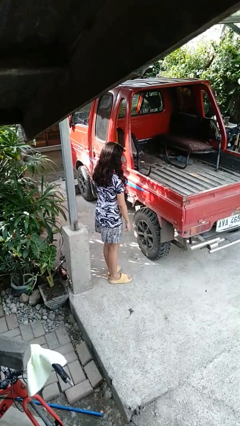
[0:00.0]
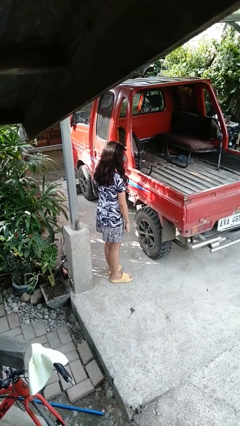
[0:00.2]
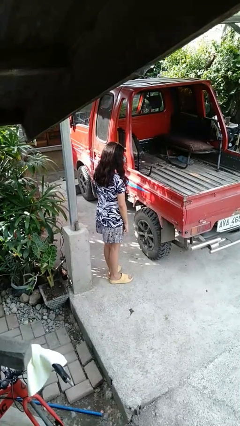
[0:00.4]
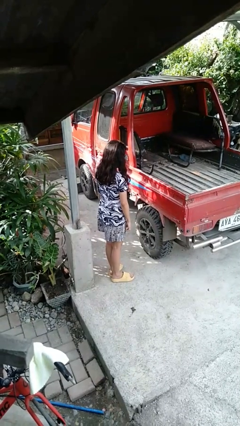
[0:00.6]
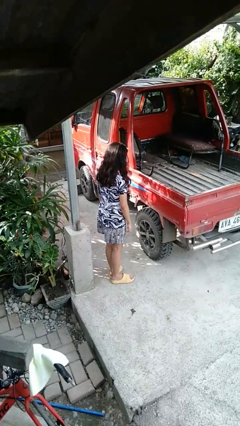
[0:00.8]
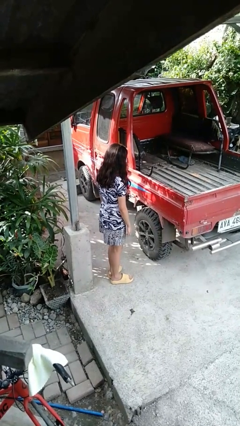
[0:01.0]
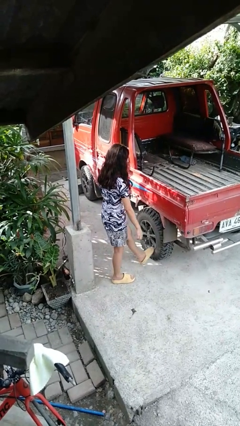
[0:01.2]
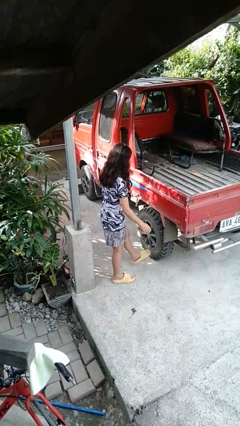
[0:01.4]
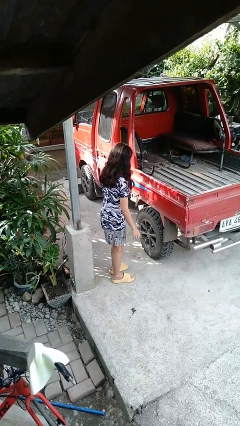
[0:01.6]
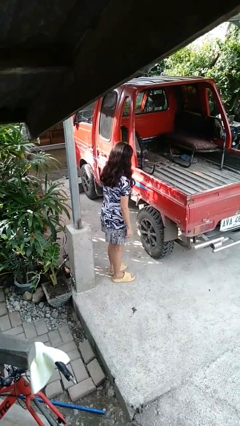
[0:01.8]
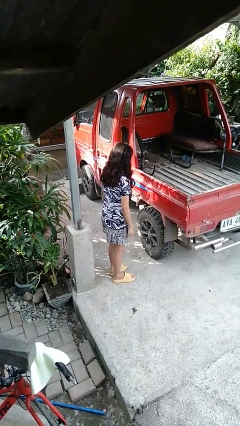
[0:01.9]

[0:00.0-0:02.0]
person kicks car tires

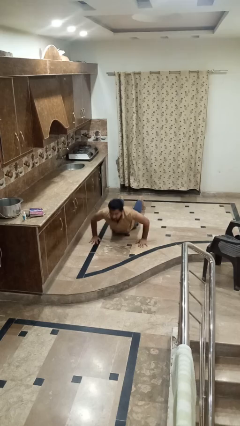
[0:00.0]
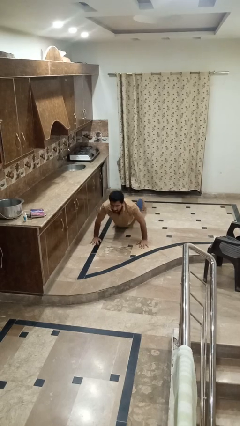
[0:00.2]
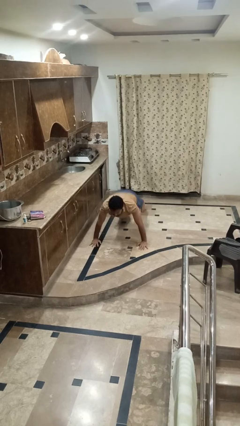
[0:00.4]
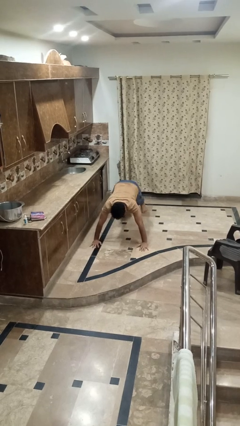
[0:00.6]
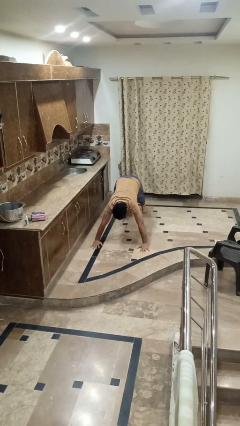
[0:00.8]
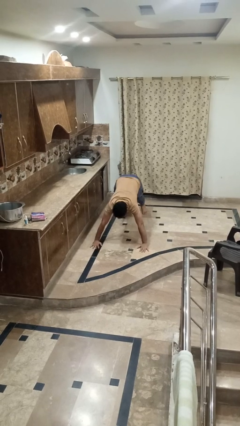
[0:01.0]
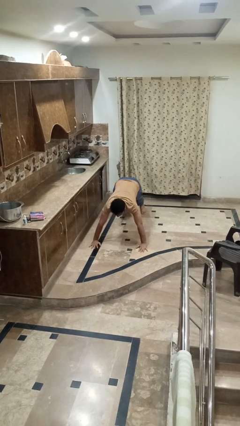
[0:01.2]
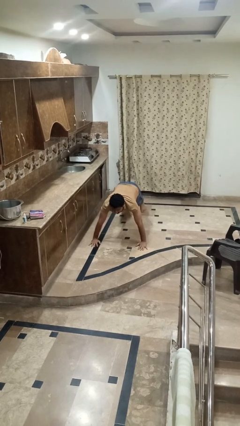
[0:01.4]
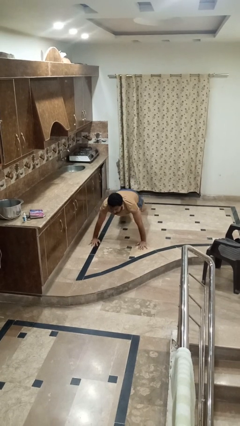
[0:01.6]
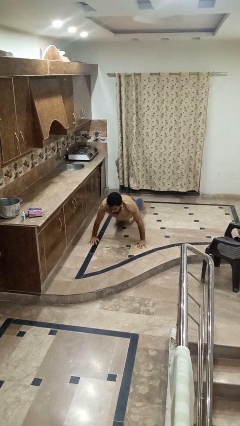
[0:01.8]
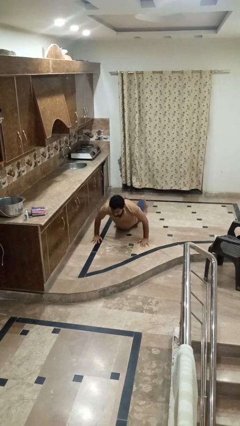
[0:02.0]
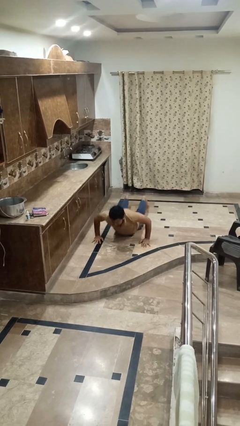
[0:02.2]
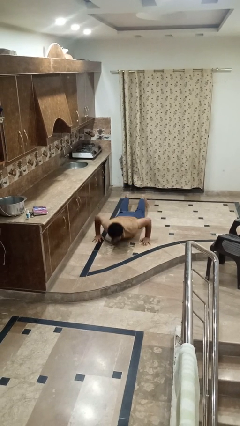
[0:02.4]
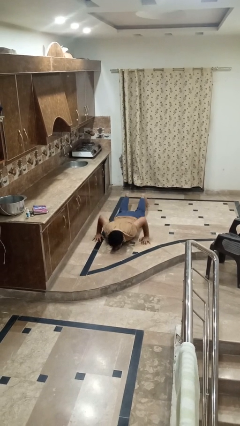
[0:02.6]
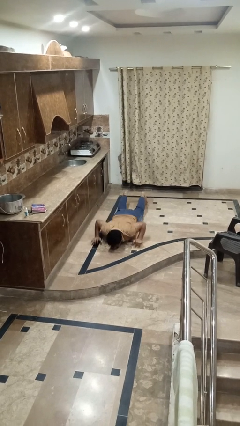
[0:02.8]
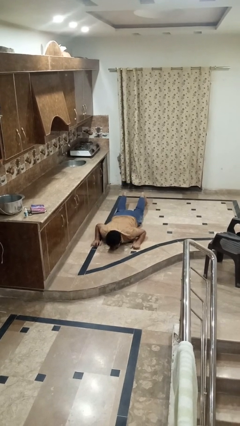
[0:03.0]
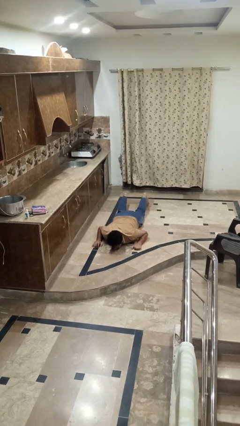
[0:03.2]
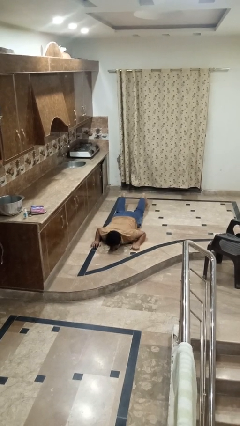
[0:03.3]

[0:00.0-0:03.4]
person exercises with pushup

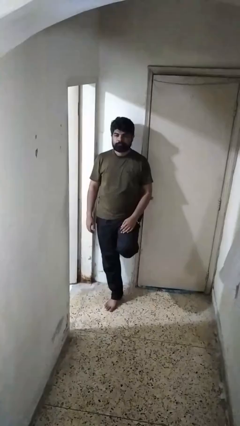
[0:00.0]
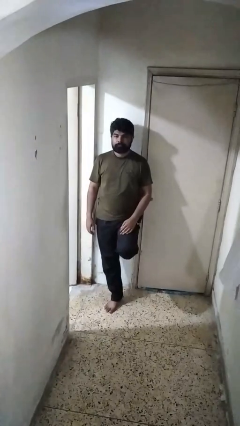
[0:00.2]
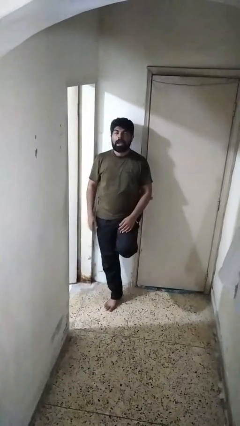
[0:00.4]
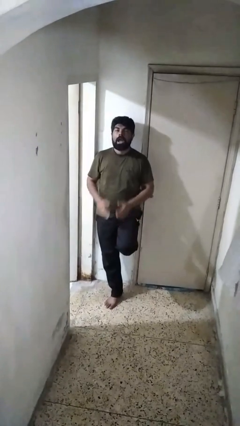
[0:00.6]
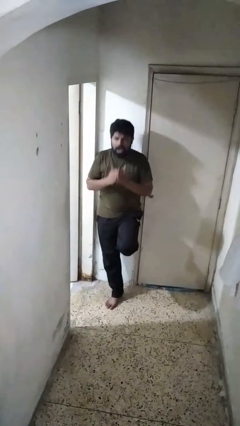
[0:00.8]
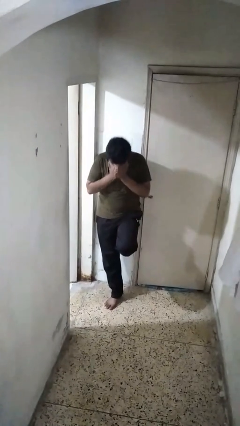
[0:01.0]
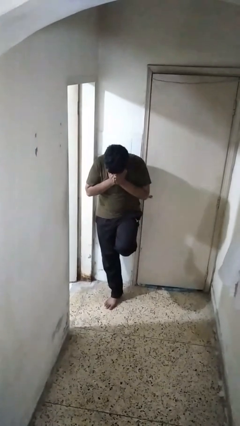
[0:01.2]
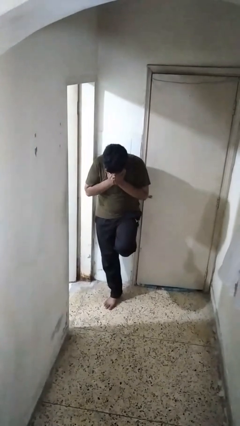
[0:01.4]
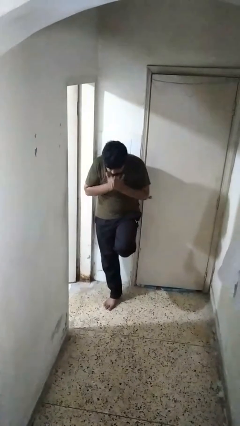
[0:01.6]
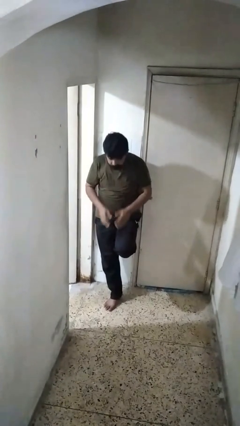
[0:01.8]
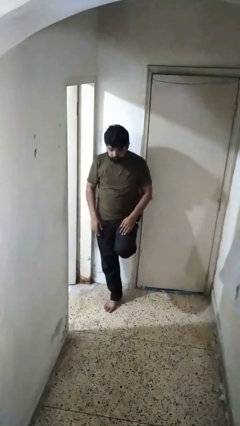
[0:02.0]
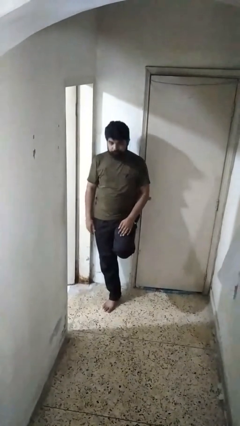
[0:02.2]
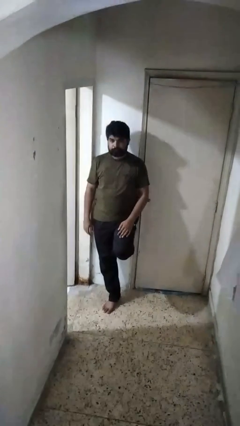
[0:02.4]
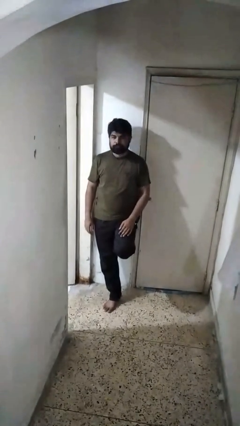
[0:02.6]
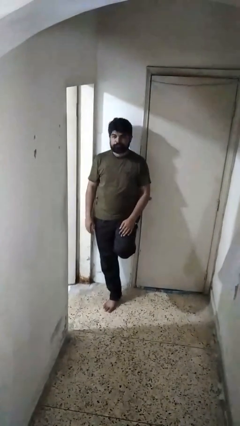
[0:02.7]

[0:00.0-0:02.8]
person sneezes into hand

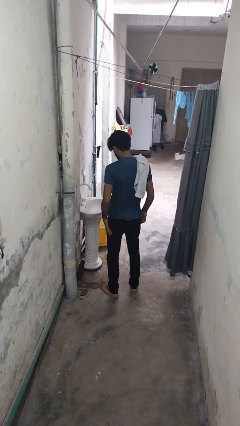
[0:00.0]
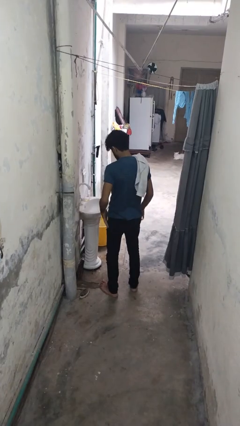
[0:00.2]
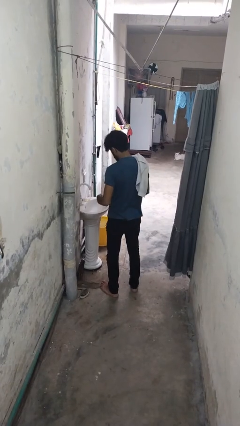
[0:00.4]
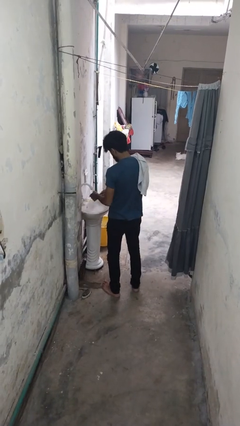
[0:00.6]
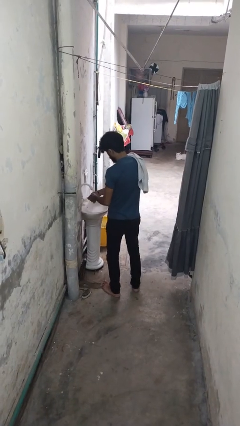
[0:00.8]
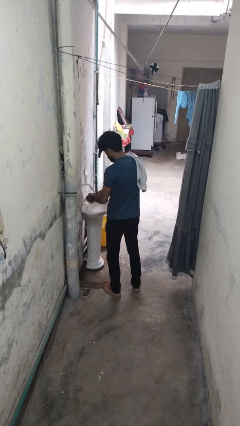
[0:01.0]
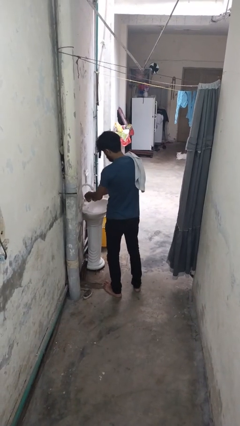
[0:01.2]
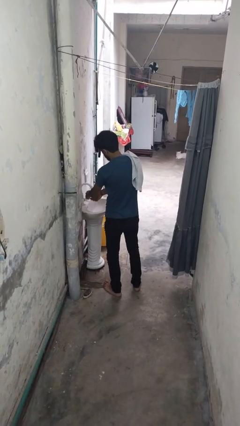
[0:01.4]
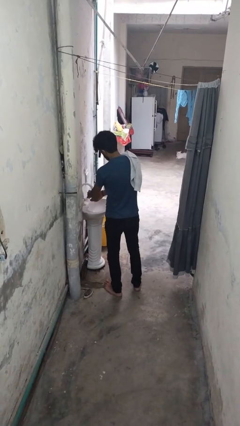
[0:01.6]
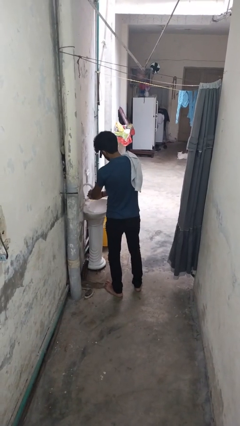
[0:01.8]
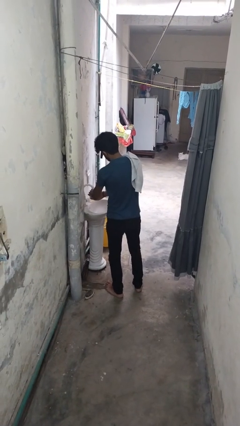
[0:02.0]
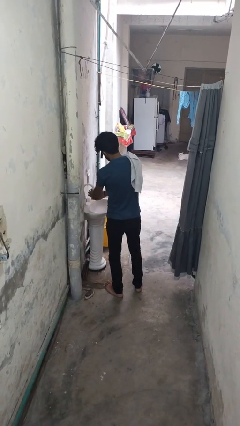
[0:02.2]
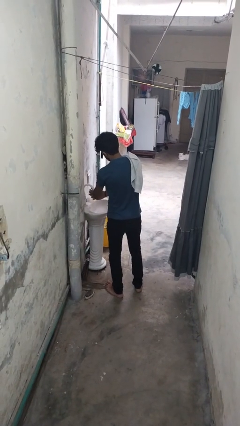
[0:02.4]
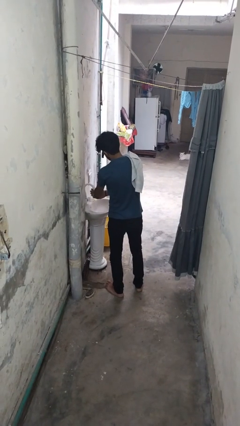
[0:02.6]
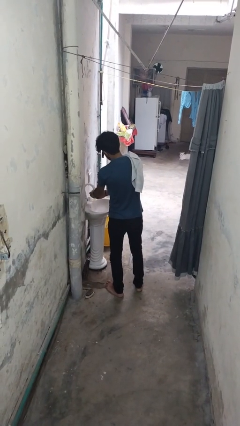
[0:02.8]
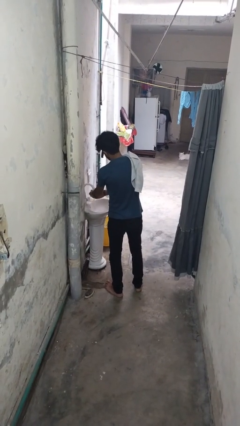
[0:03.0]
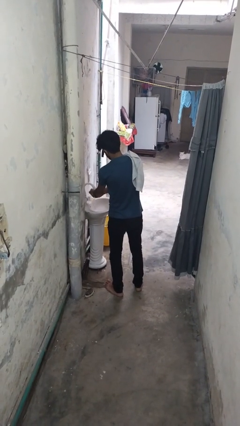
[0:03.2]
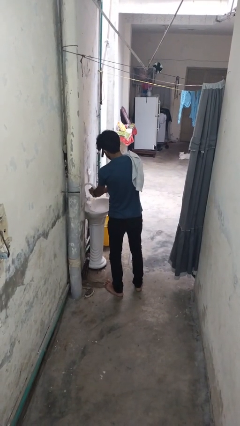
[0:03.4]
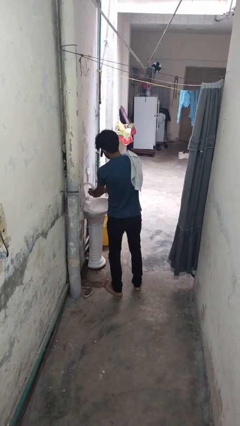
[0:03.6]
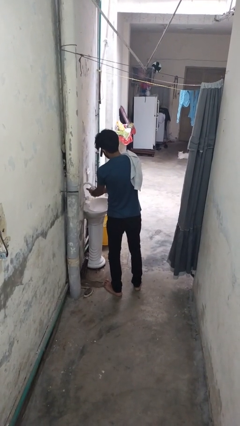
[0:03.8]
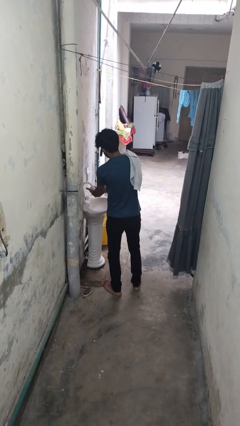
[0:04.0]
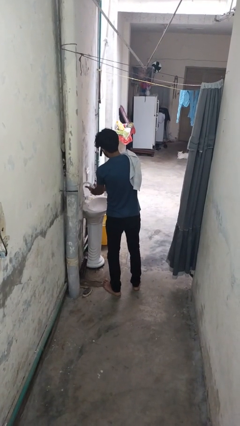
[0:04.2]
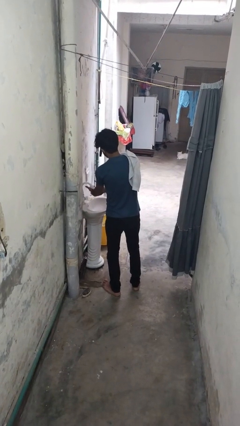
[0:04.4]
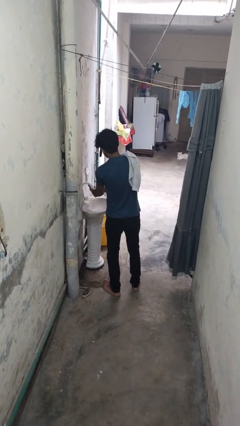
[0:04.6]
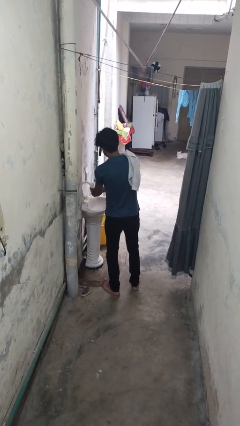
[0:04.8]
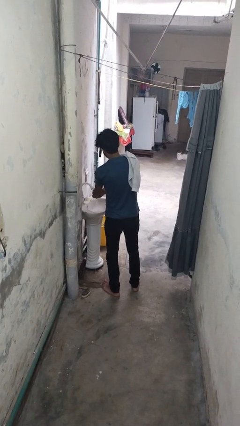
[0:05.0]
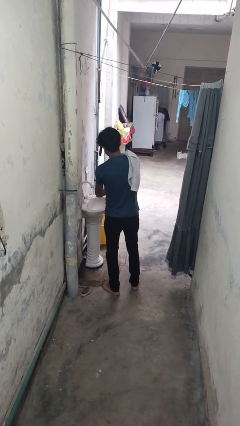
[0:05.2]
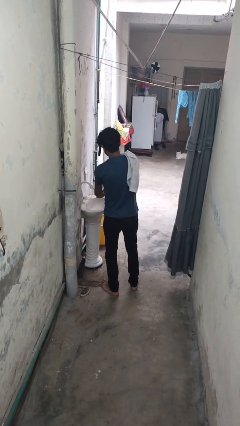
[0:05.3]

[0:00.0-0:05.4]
person washes hands

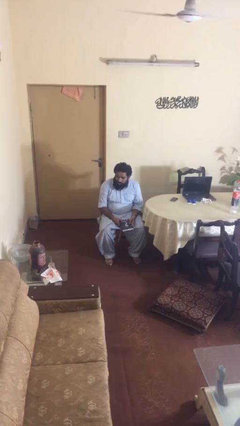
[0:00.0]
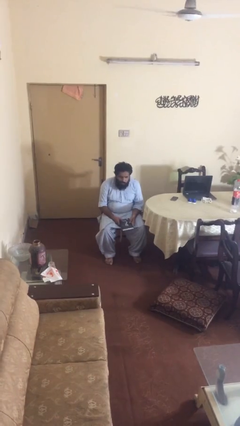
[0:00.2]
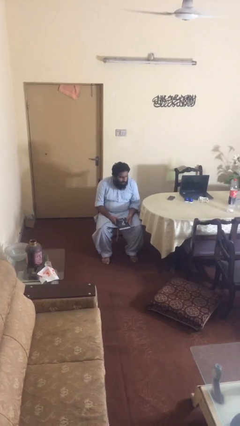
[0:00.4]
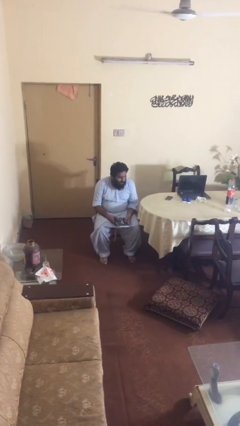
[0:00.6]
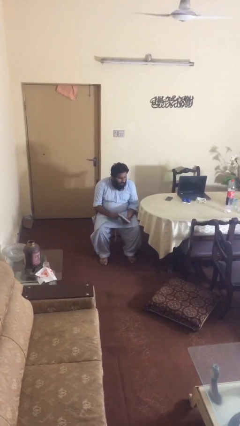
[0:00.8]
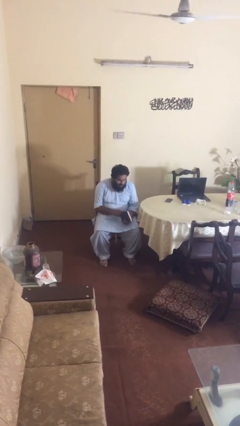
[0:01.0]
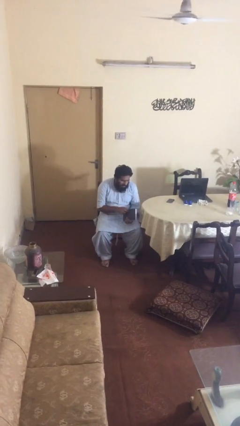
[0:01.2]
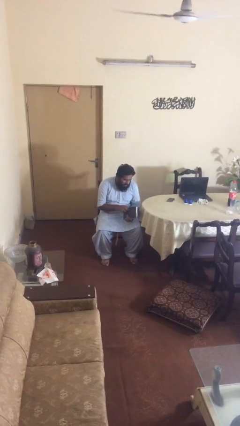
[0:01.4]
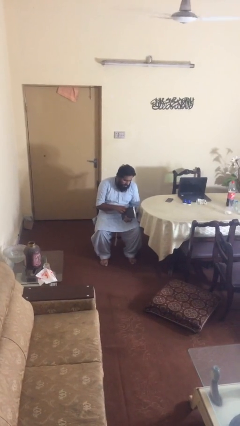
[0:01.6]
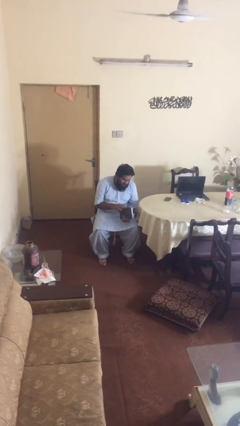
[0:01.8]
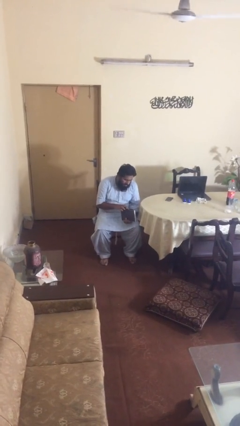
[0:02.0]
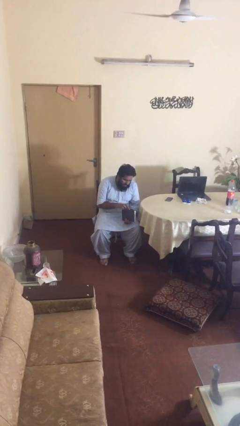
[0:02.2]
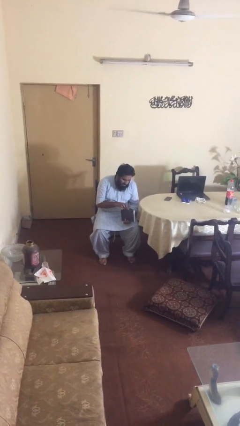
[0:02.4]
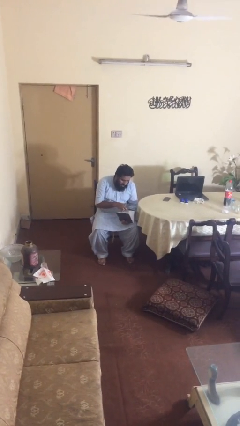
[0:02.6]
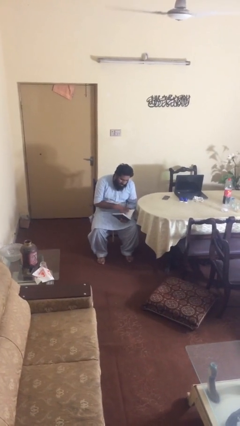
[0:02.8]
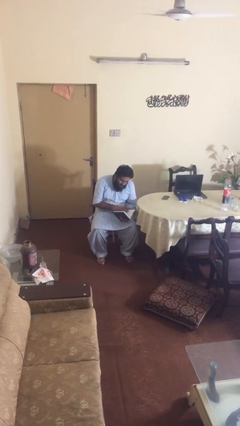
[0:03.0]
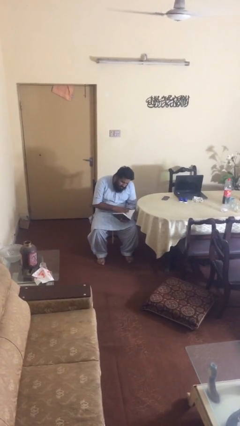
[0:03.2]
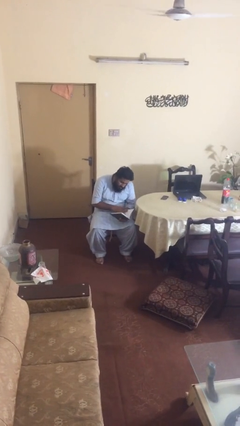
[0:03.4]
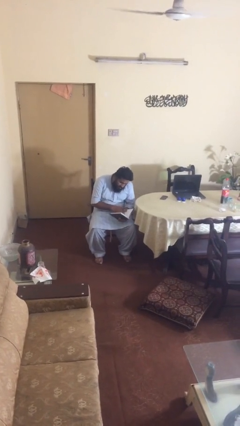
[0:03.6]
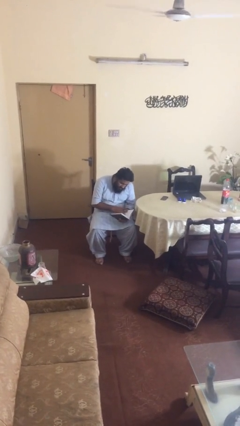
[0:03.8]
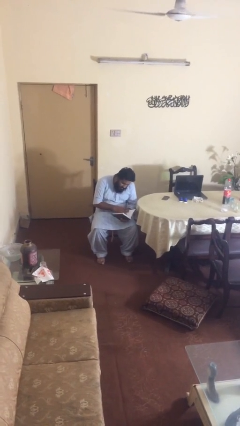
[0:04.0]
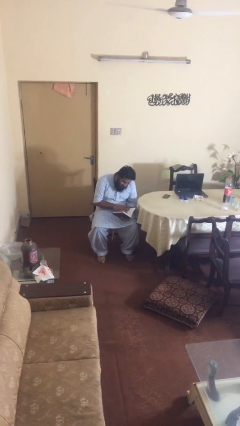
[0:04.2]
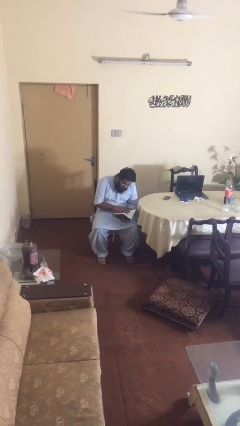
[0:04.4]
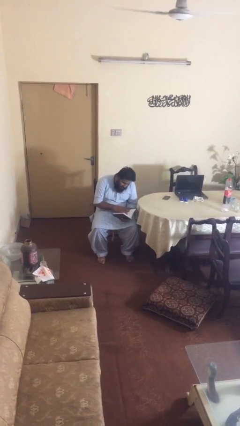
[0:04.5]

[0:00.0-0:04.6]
person reads document
